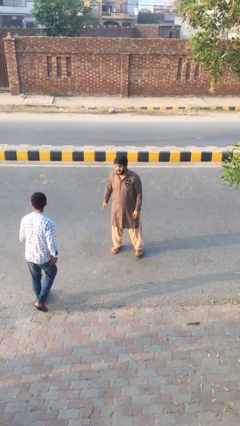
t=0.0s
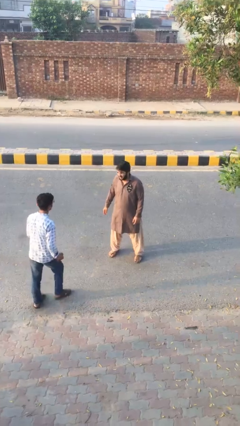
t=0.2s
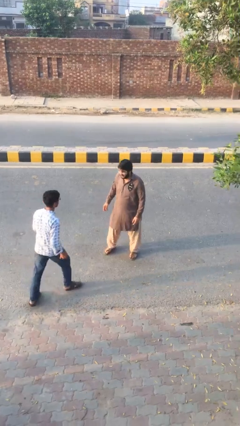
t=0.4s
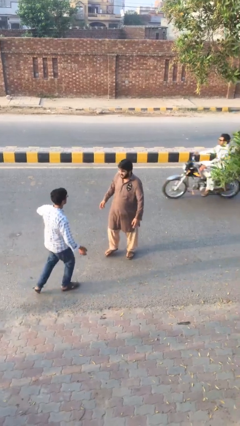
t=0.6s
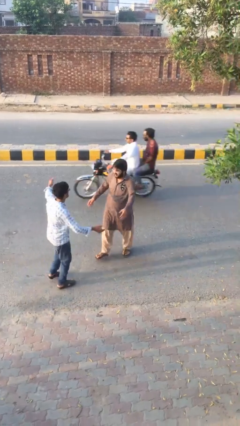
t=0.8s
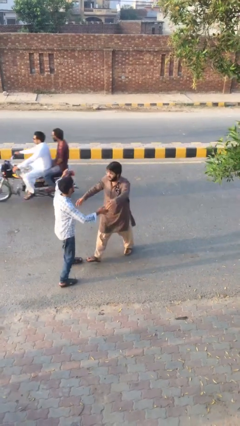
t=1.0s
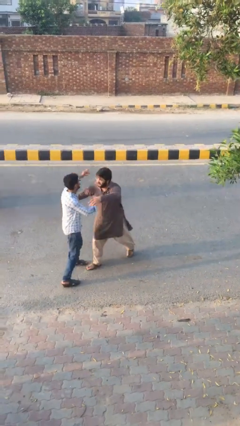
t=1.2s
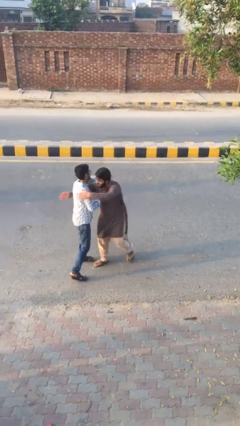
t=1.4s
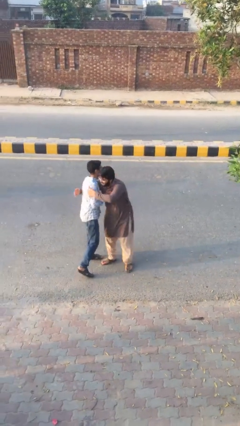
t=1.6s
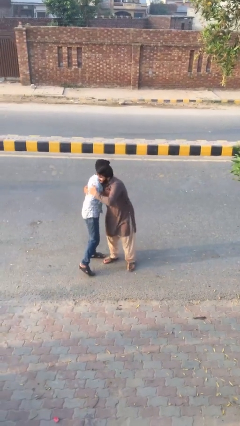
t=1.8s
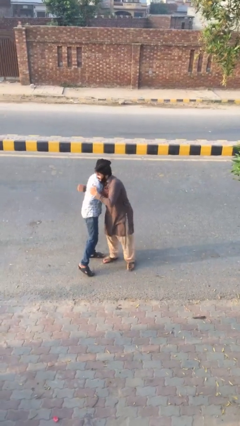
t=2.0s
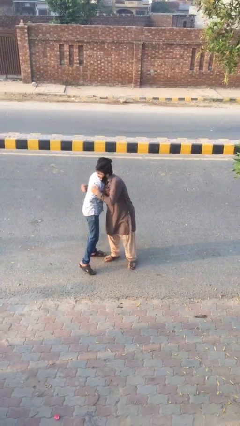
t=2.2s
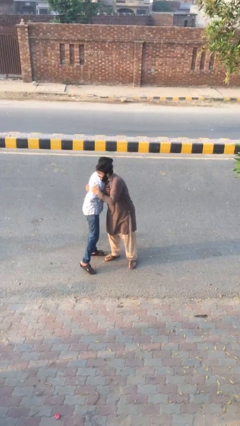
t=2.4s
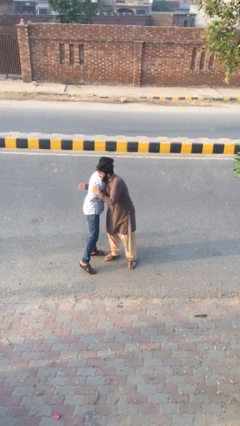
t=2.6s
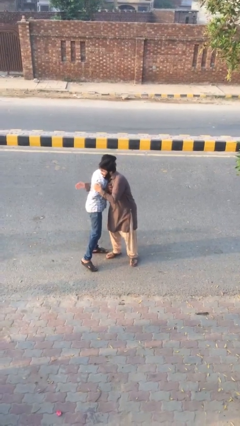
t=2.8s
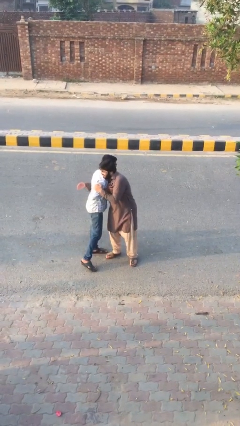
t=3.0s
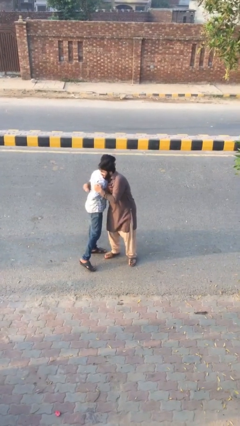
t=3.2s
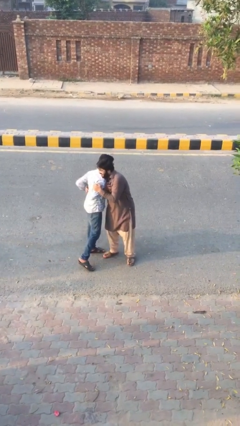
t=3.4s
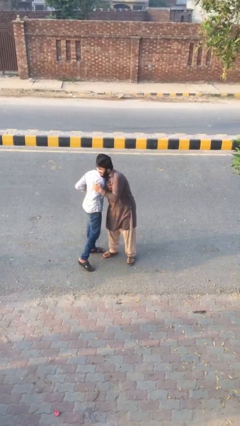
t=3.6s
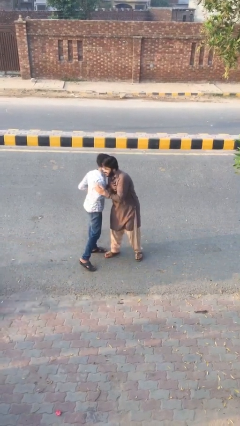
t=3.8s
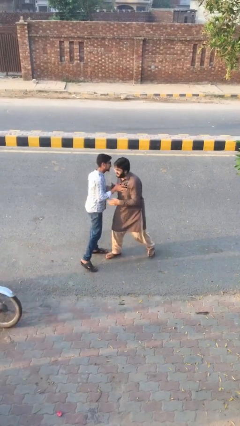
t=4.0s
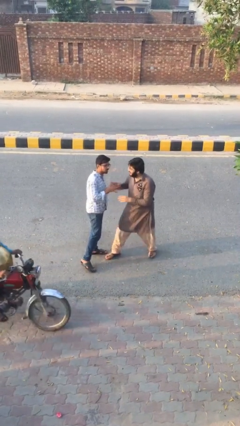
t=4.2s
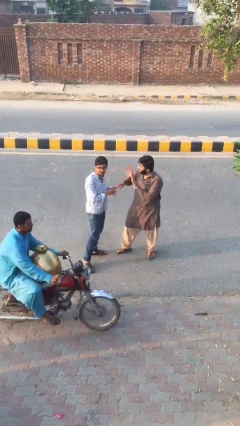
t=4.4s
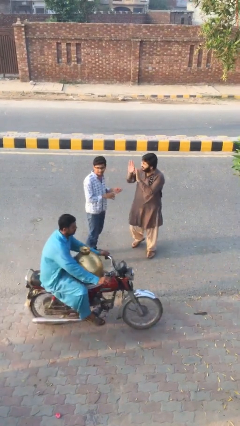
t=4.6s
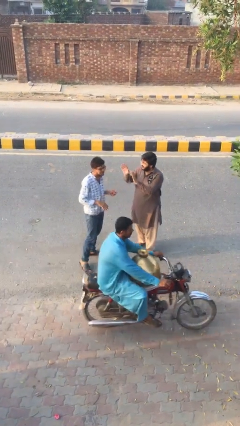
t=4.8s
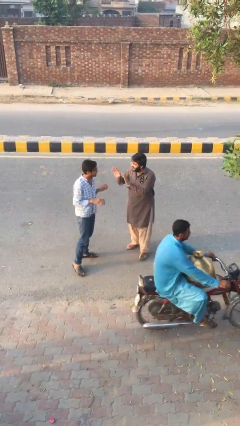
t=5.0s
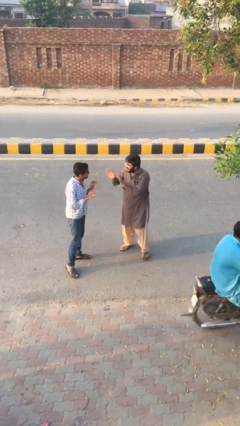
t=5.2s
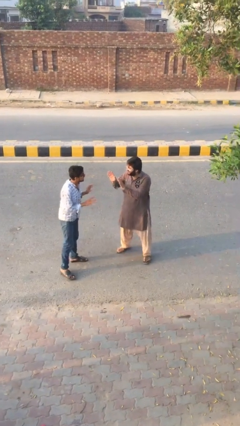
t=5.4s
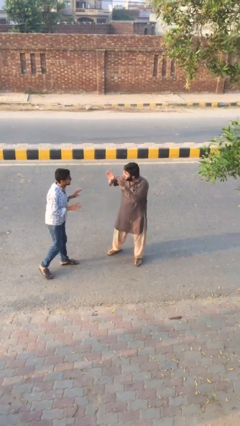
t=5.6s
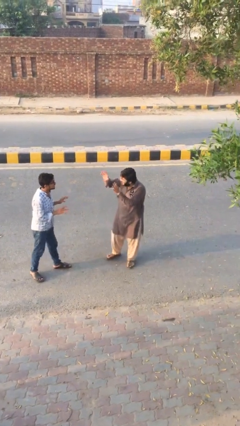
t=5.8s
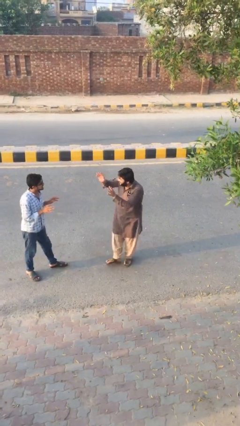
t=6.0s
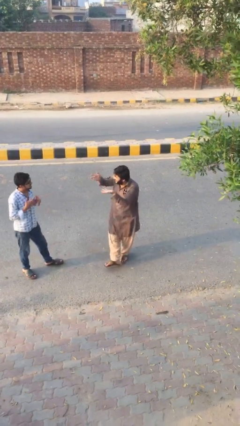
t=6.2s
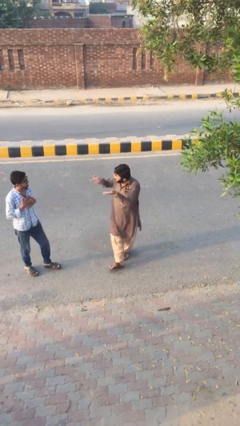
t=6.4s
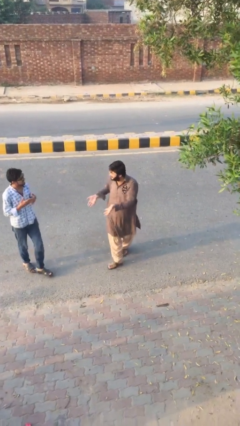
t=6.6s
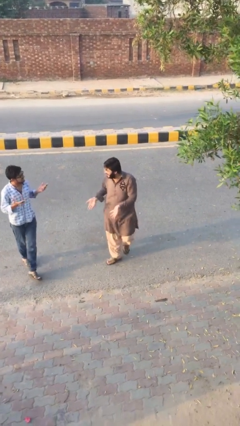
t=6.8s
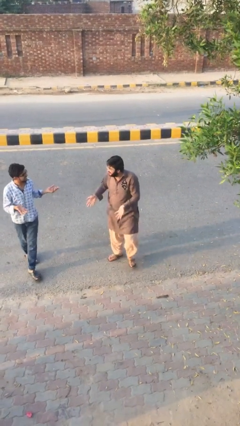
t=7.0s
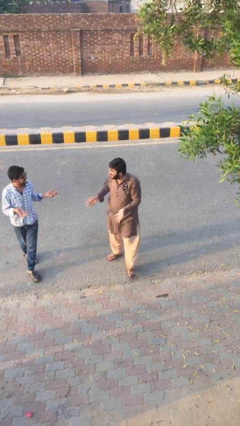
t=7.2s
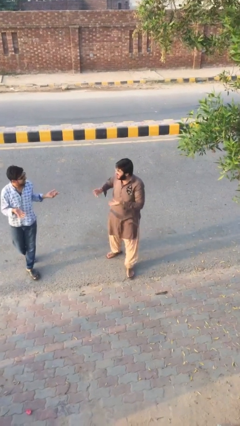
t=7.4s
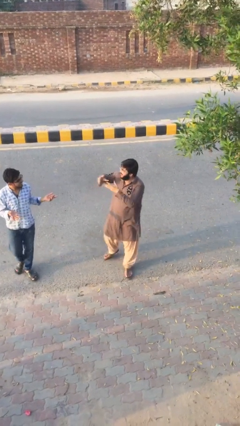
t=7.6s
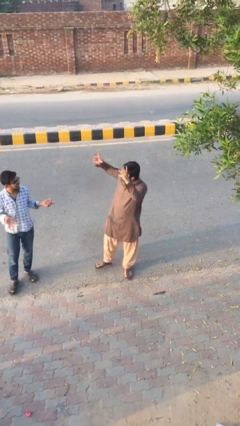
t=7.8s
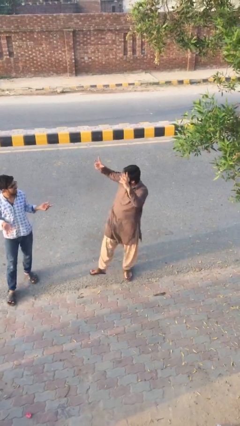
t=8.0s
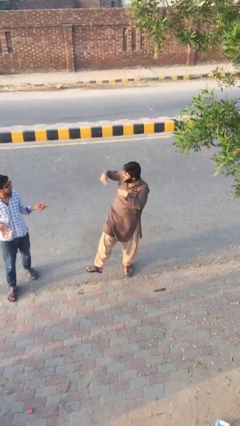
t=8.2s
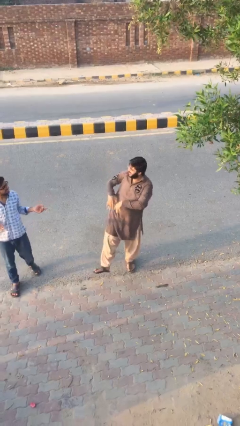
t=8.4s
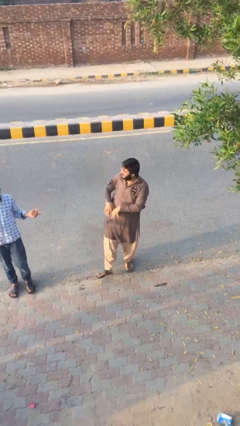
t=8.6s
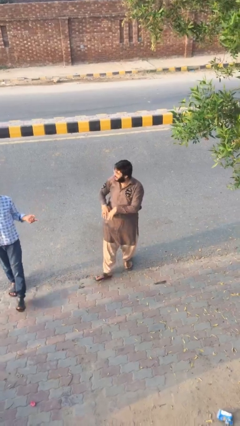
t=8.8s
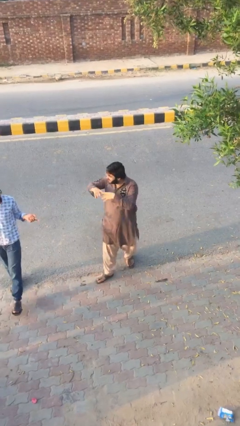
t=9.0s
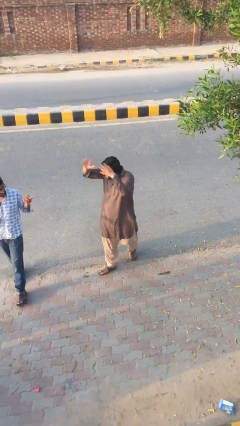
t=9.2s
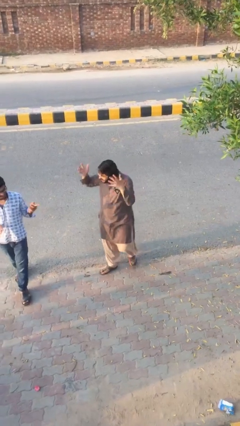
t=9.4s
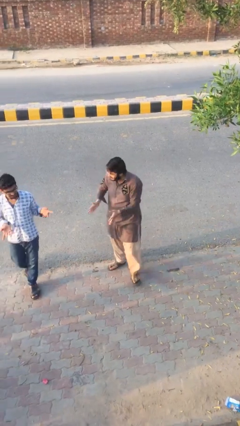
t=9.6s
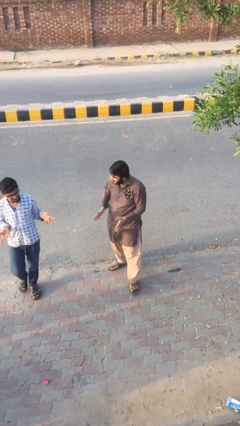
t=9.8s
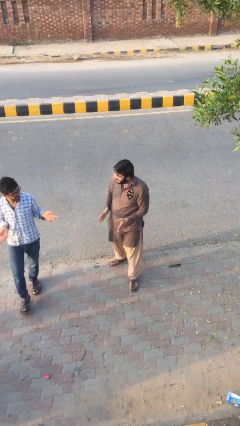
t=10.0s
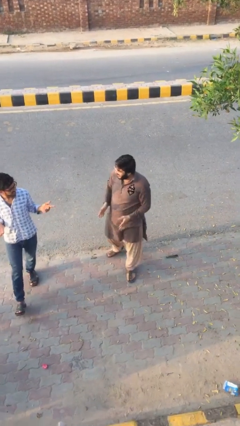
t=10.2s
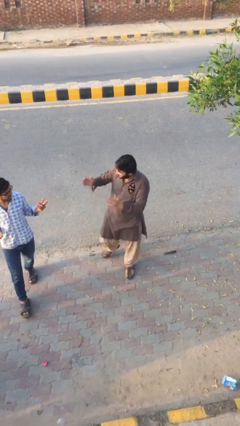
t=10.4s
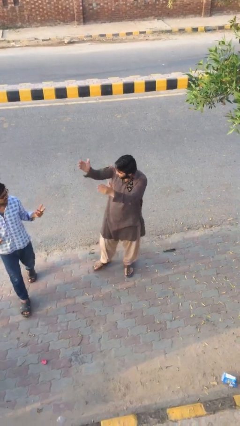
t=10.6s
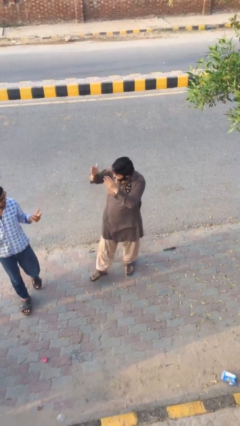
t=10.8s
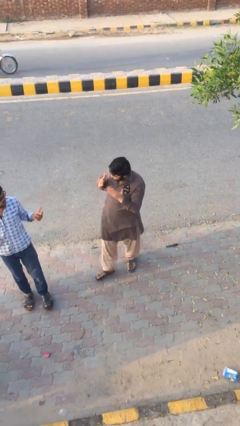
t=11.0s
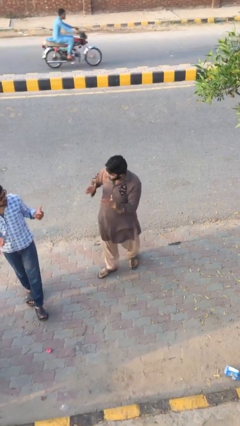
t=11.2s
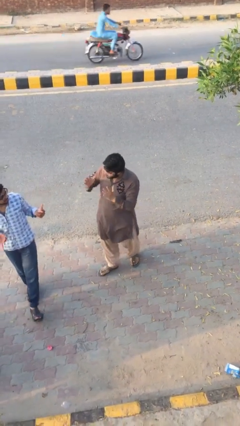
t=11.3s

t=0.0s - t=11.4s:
person embraces person

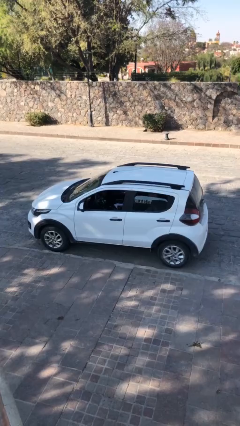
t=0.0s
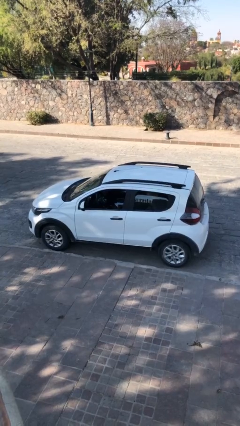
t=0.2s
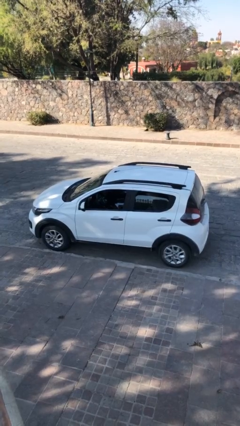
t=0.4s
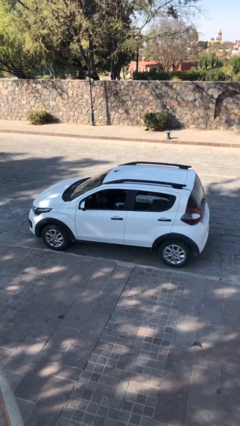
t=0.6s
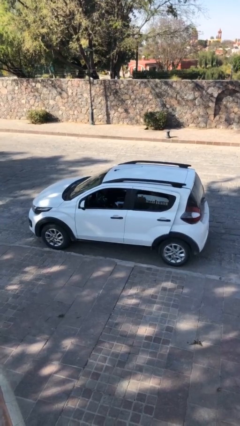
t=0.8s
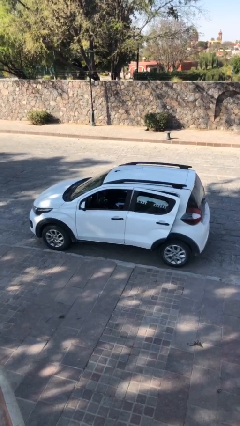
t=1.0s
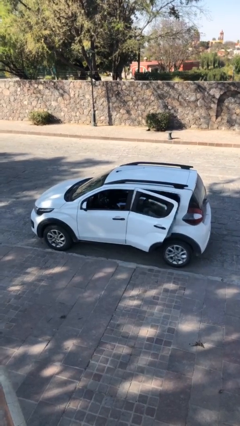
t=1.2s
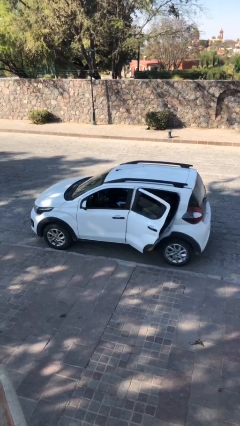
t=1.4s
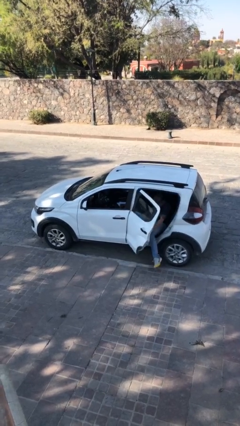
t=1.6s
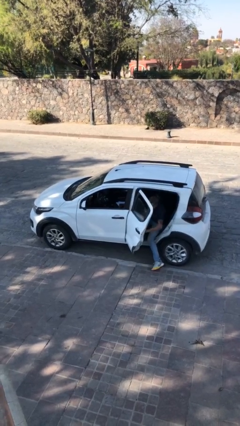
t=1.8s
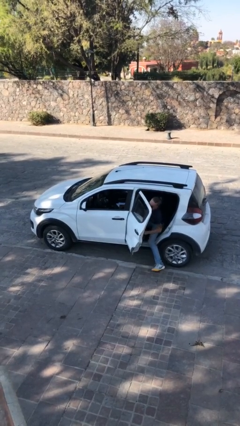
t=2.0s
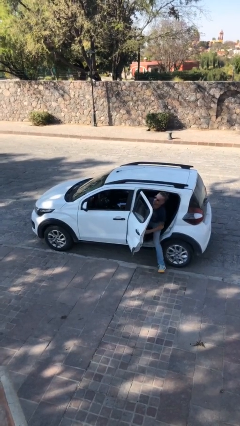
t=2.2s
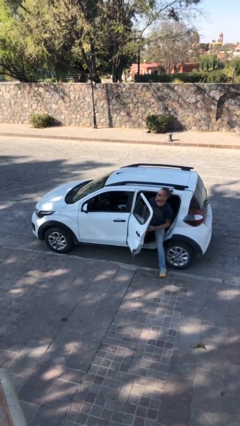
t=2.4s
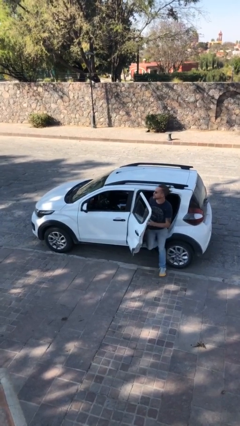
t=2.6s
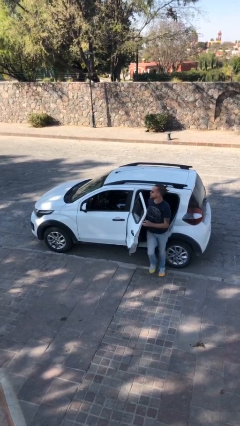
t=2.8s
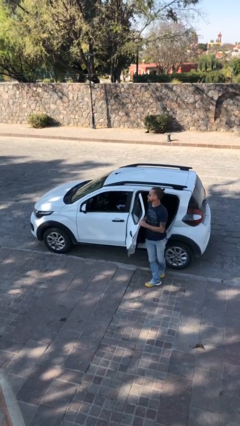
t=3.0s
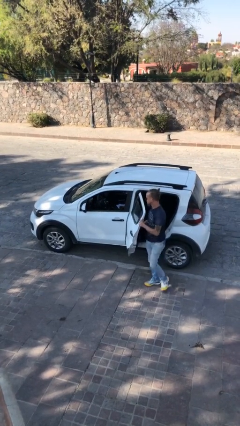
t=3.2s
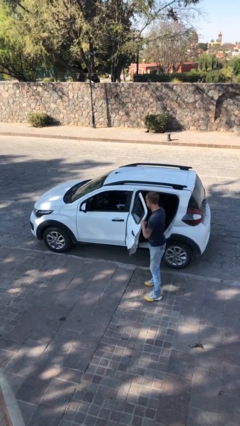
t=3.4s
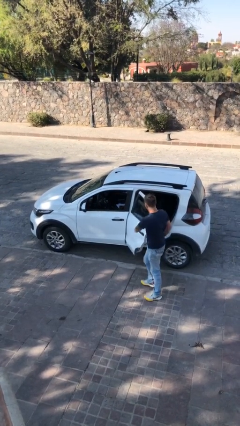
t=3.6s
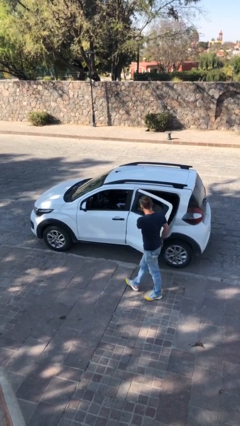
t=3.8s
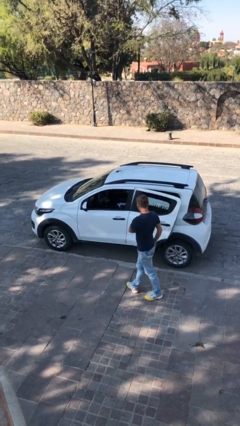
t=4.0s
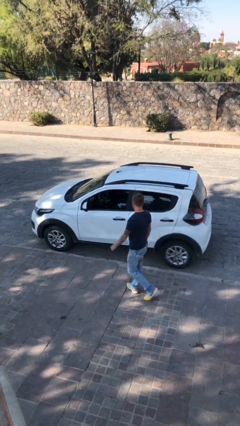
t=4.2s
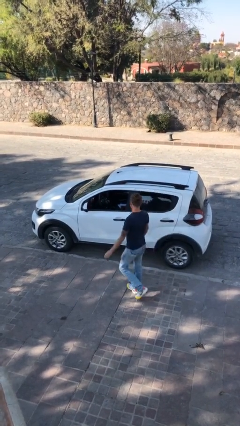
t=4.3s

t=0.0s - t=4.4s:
car drops off person

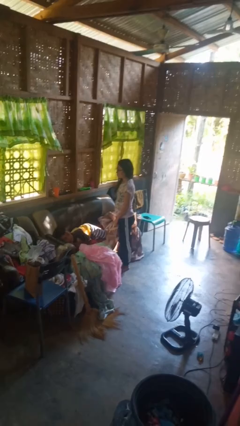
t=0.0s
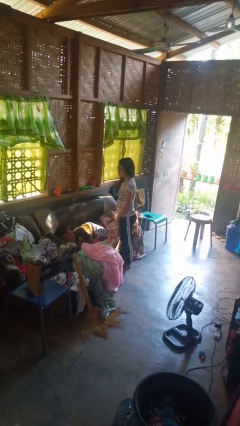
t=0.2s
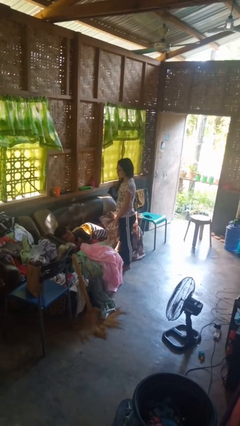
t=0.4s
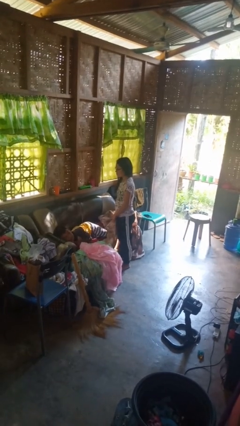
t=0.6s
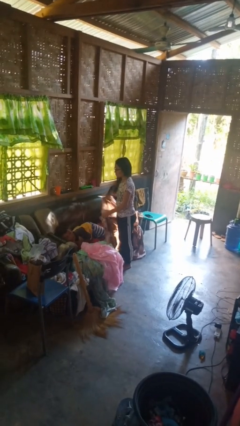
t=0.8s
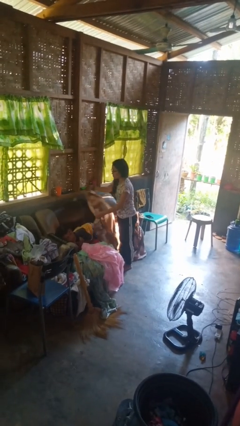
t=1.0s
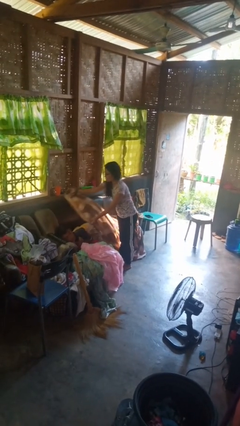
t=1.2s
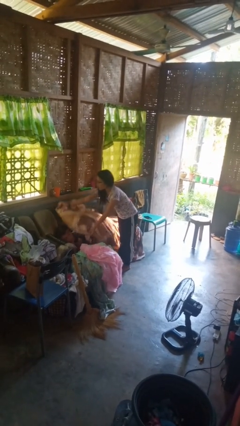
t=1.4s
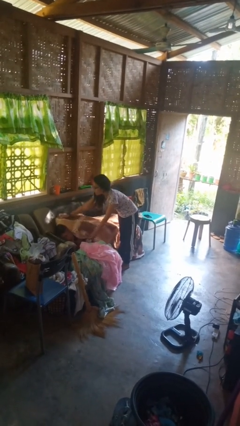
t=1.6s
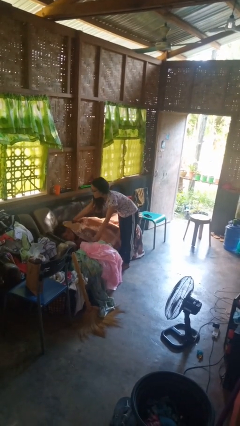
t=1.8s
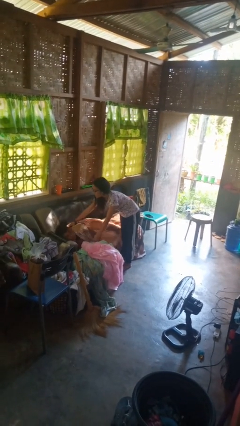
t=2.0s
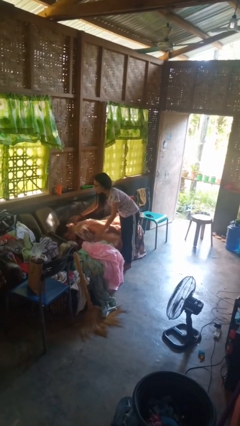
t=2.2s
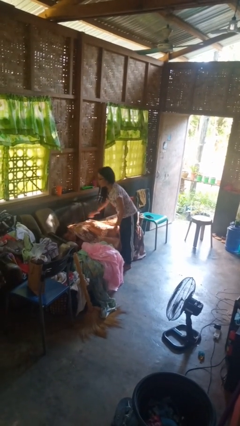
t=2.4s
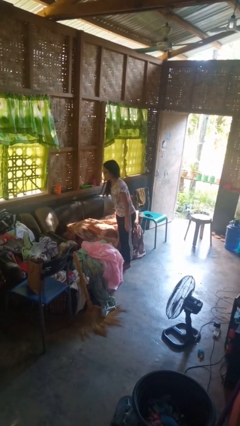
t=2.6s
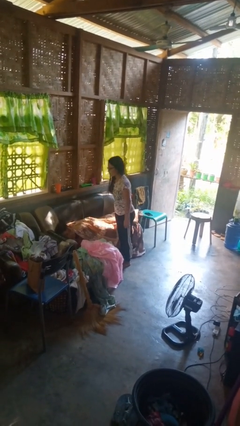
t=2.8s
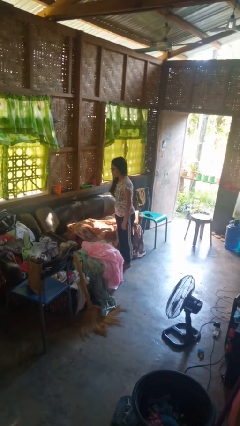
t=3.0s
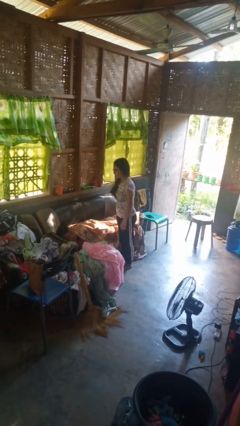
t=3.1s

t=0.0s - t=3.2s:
person covers friend with blanket
